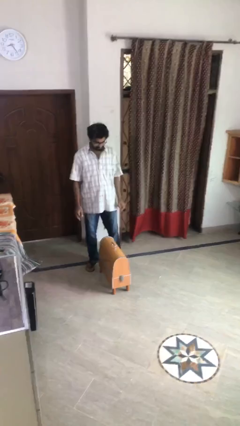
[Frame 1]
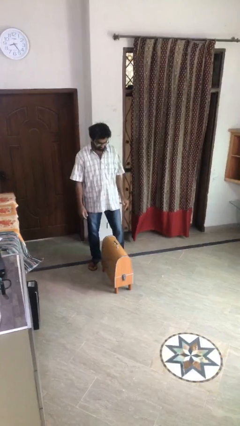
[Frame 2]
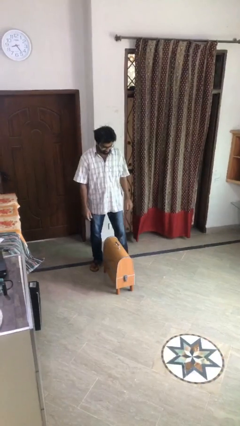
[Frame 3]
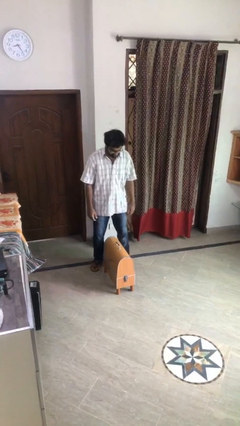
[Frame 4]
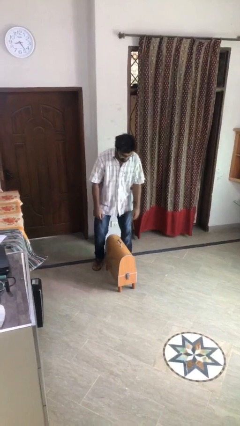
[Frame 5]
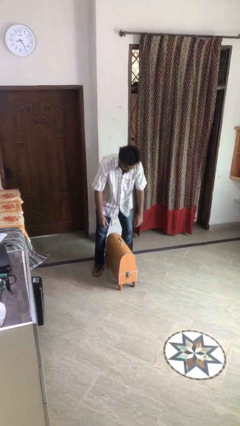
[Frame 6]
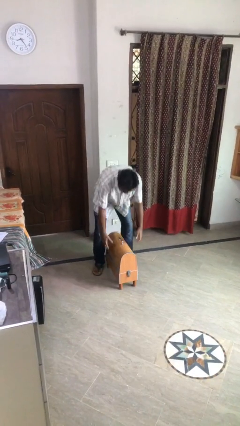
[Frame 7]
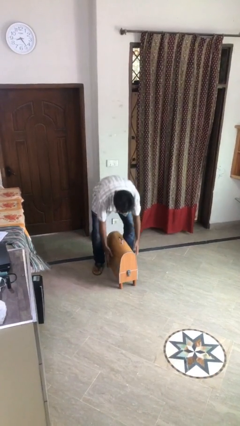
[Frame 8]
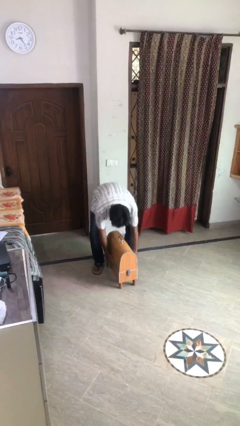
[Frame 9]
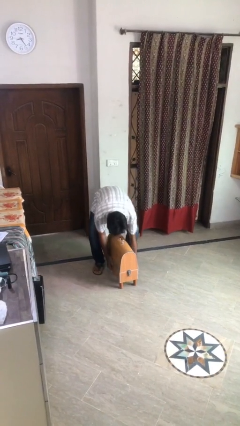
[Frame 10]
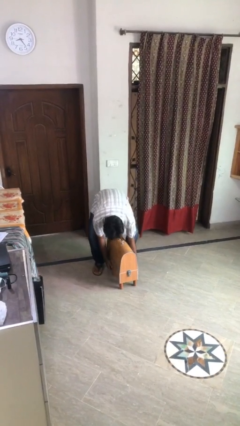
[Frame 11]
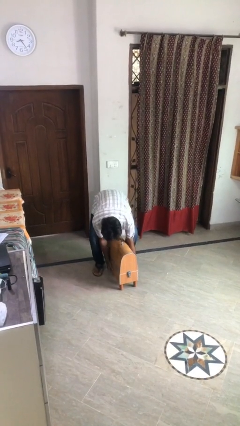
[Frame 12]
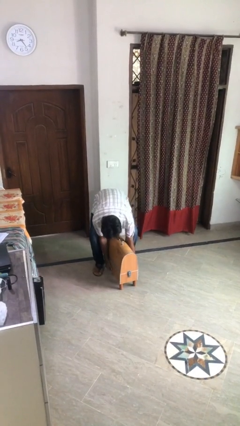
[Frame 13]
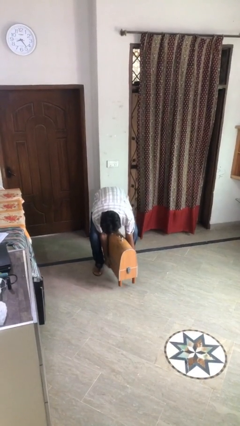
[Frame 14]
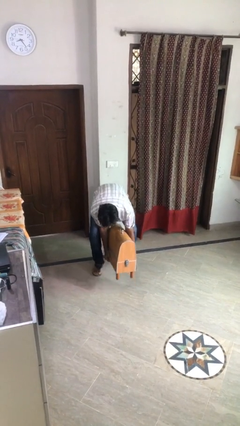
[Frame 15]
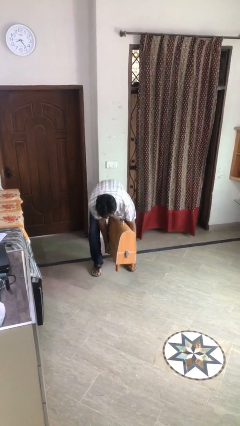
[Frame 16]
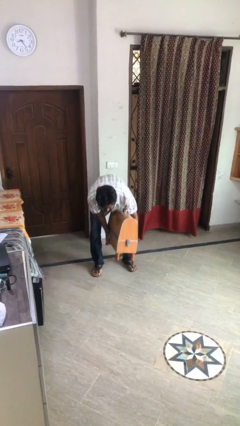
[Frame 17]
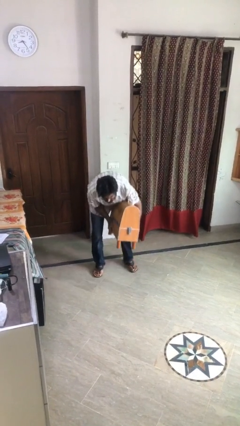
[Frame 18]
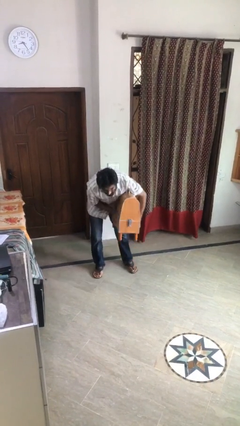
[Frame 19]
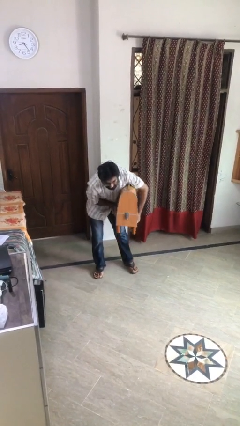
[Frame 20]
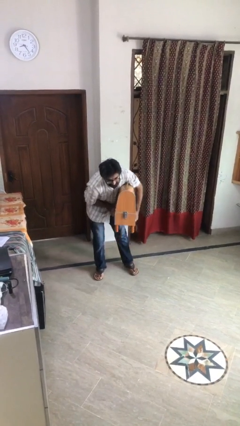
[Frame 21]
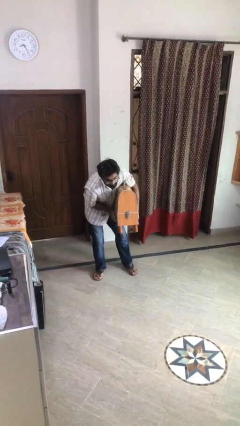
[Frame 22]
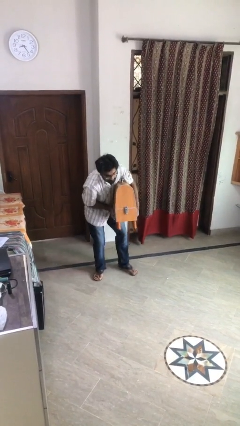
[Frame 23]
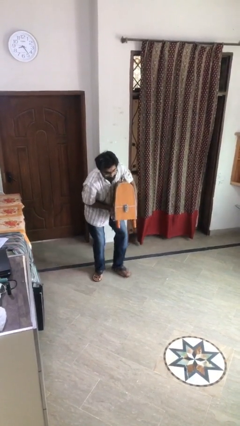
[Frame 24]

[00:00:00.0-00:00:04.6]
person picks up object from floor

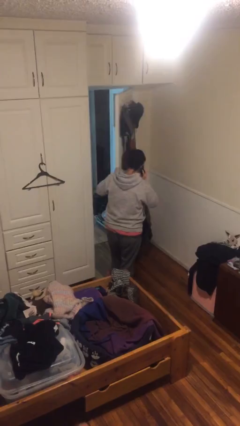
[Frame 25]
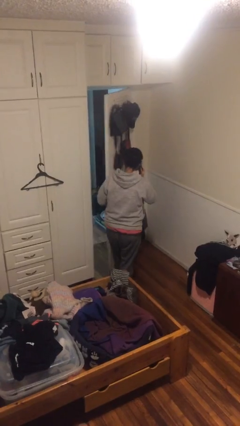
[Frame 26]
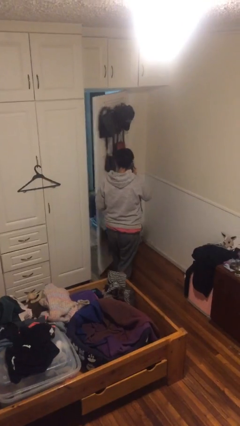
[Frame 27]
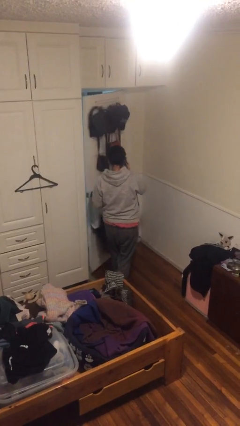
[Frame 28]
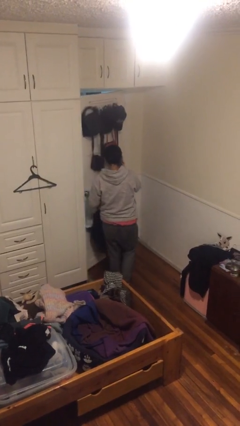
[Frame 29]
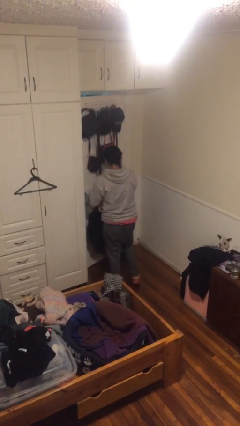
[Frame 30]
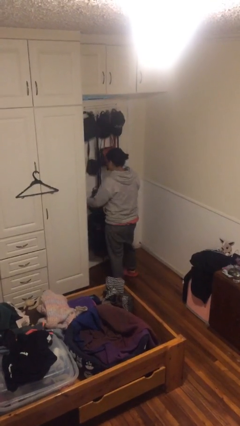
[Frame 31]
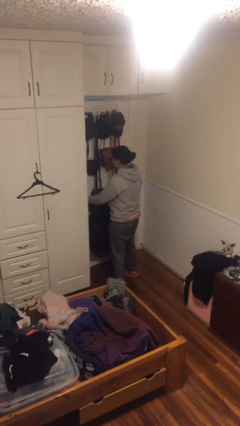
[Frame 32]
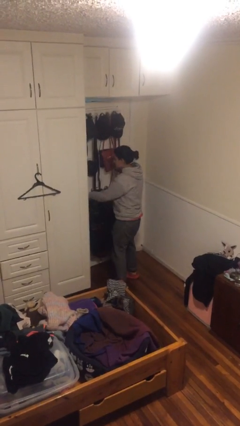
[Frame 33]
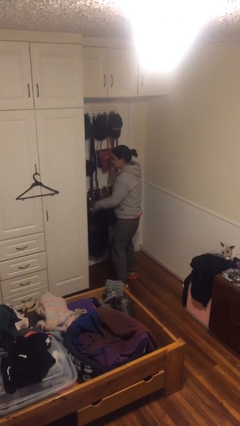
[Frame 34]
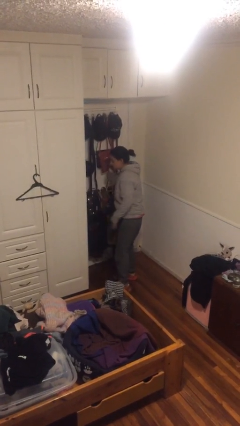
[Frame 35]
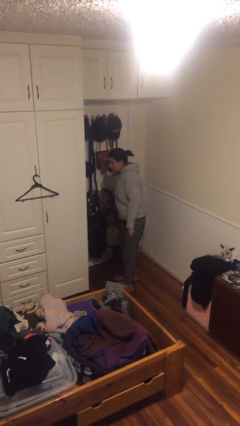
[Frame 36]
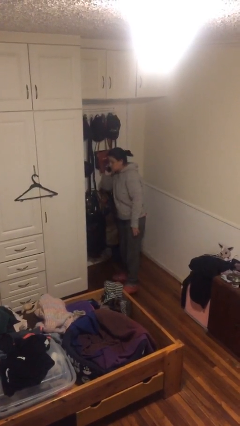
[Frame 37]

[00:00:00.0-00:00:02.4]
person closes facility door

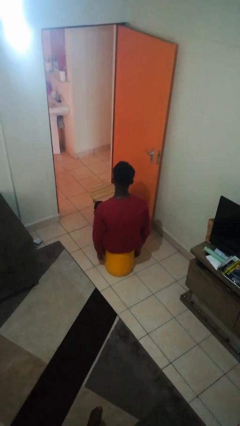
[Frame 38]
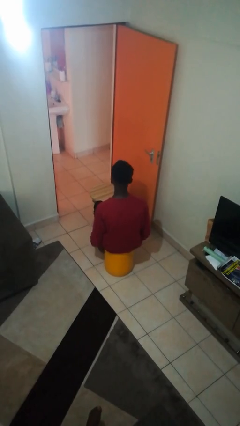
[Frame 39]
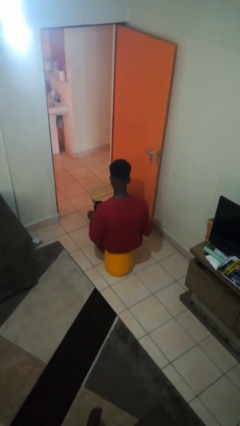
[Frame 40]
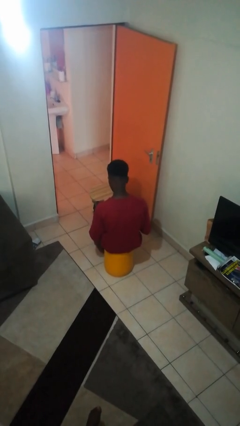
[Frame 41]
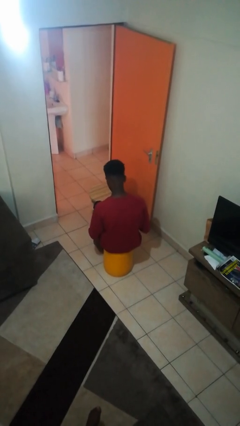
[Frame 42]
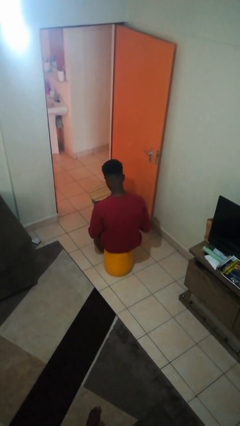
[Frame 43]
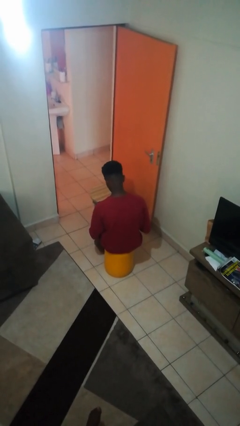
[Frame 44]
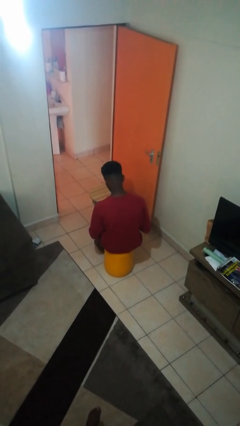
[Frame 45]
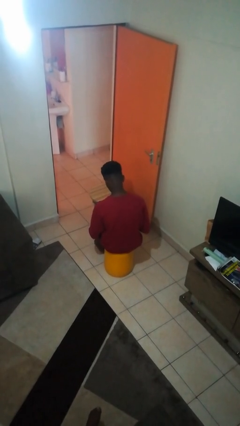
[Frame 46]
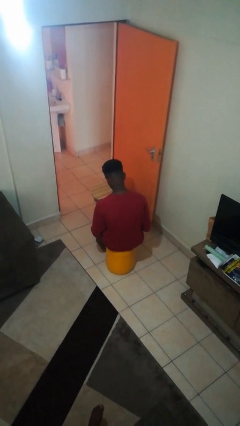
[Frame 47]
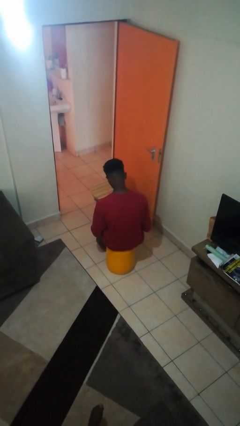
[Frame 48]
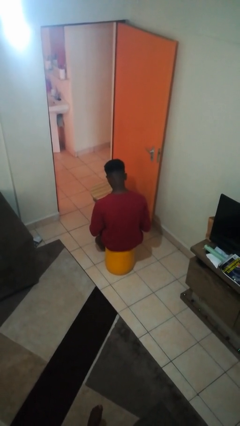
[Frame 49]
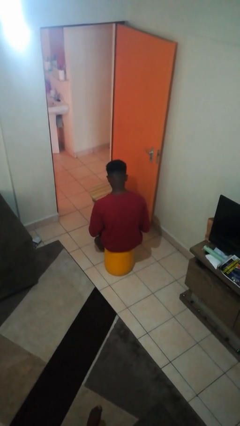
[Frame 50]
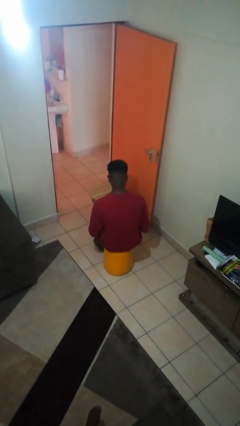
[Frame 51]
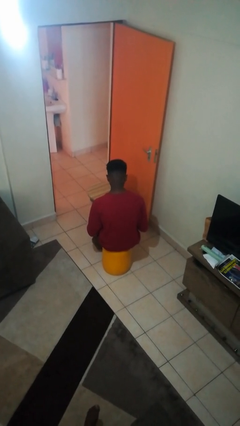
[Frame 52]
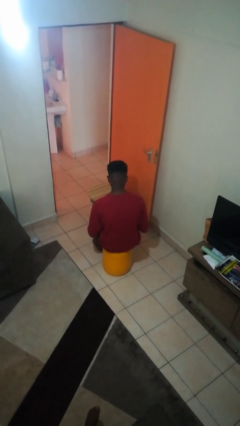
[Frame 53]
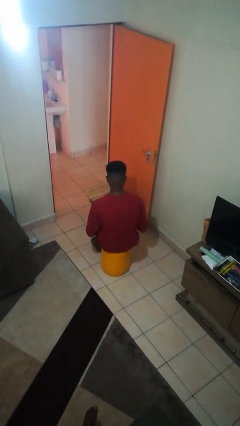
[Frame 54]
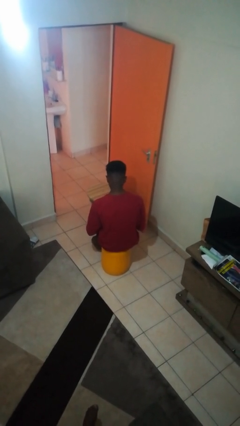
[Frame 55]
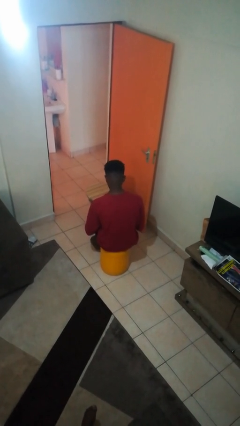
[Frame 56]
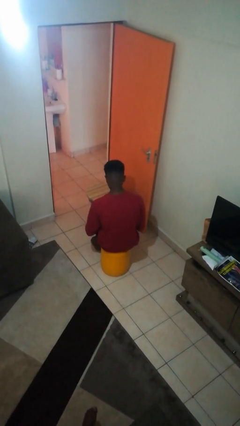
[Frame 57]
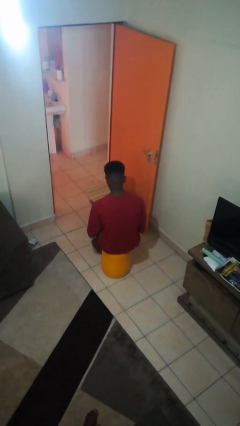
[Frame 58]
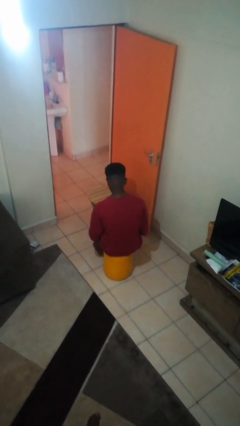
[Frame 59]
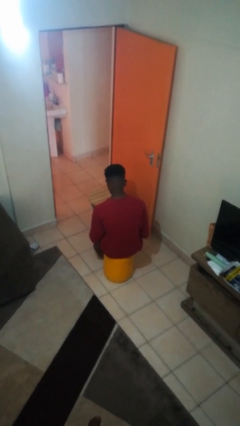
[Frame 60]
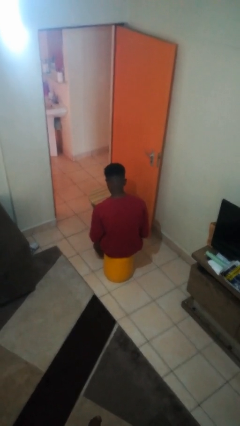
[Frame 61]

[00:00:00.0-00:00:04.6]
person looks at hands in lap

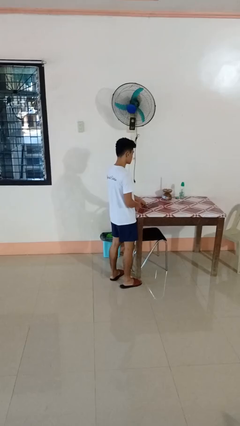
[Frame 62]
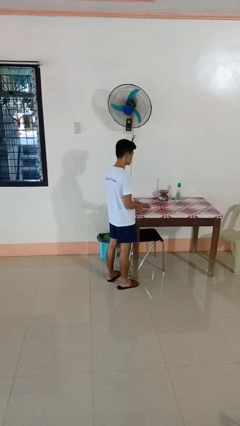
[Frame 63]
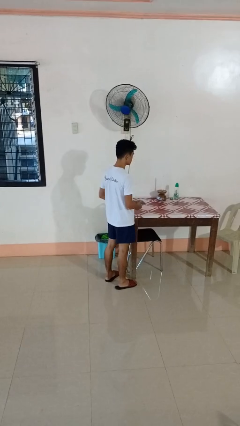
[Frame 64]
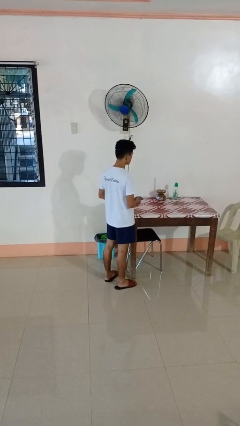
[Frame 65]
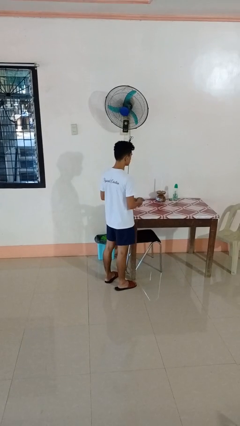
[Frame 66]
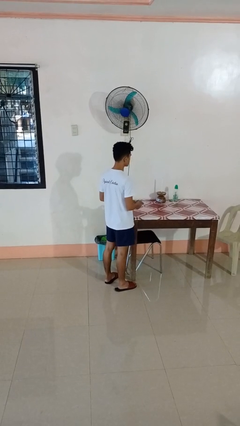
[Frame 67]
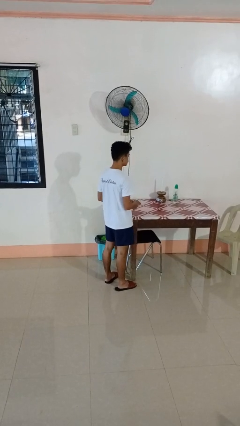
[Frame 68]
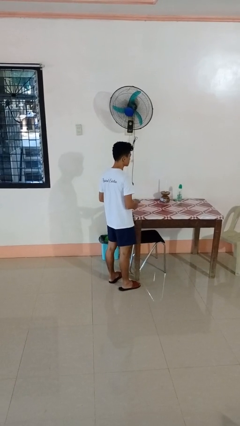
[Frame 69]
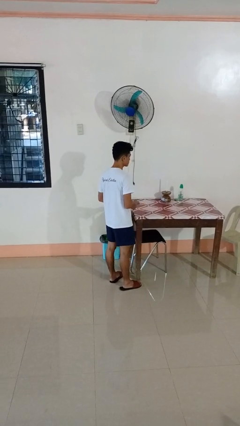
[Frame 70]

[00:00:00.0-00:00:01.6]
person picks up object from table

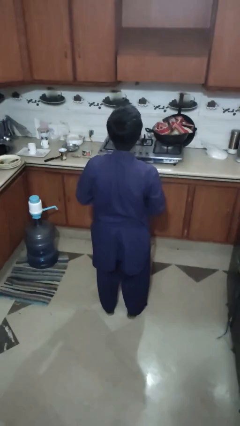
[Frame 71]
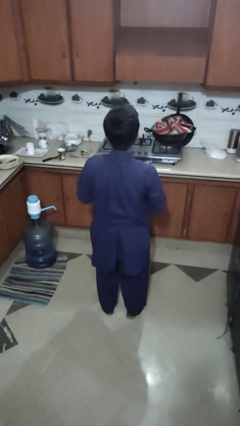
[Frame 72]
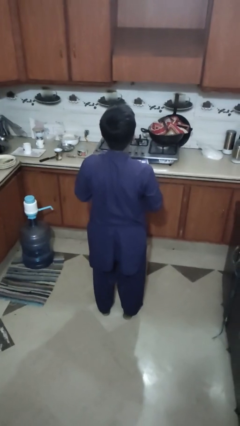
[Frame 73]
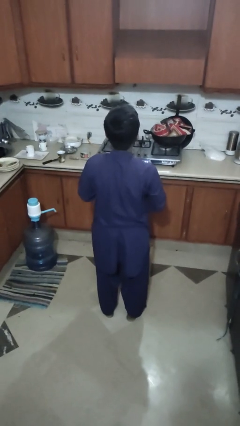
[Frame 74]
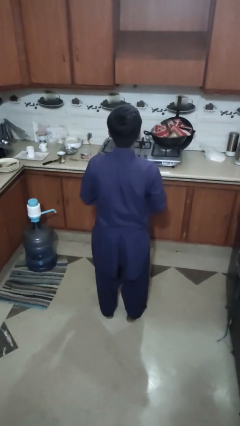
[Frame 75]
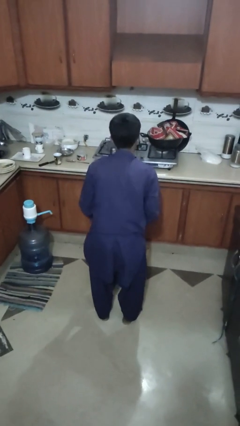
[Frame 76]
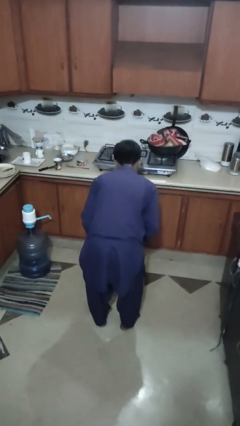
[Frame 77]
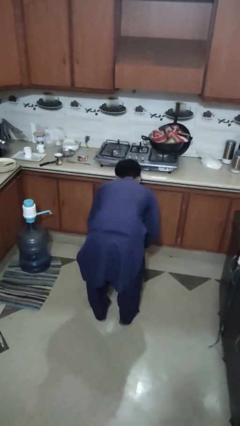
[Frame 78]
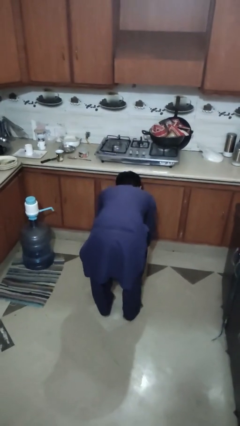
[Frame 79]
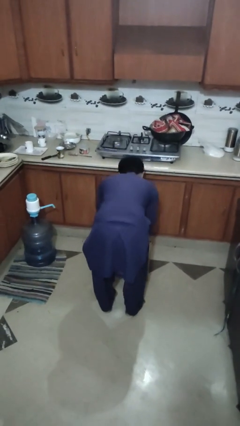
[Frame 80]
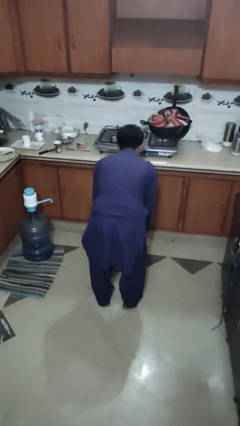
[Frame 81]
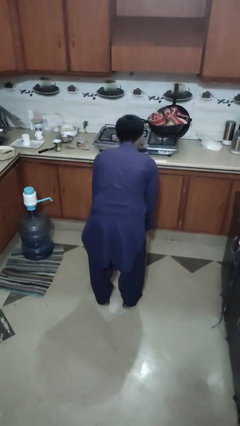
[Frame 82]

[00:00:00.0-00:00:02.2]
person puts object into box

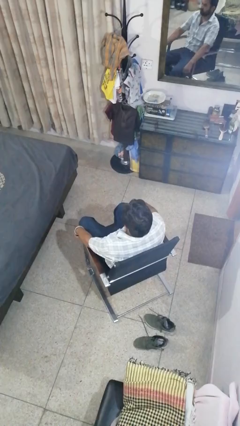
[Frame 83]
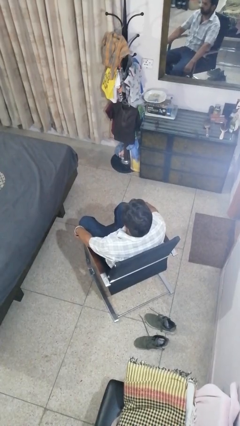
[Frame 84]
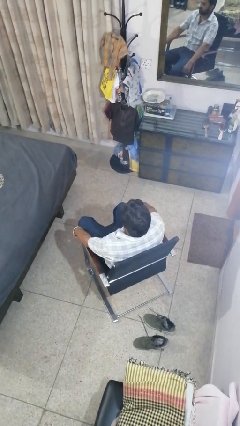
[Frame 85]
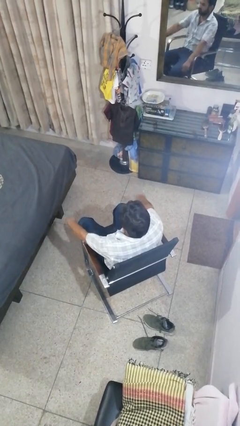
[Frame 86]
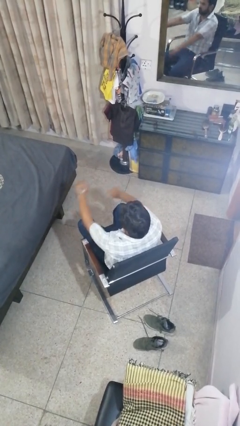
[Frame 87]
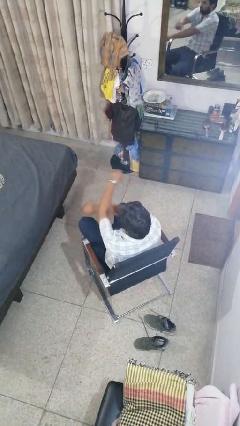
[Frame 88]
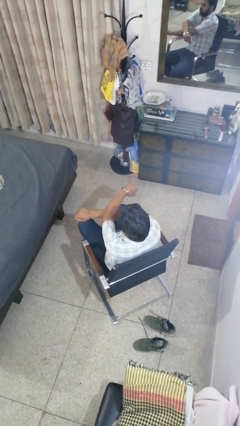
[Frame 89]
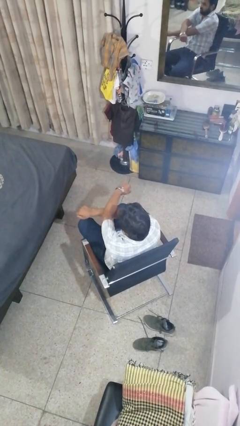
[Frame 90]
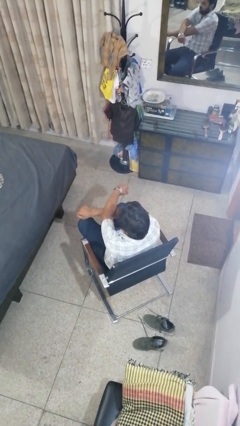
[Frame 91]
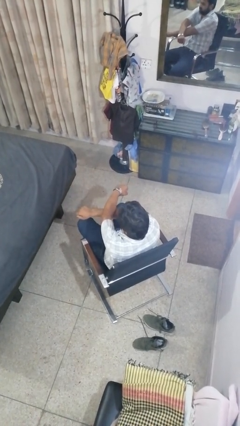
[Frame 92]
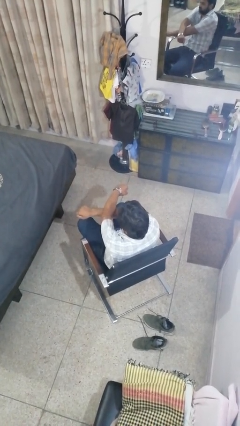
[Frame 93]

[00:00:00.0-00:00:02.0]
person gestures arms x
